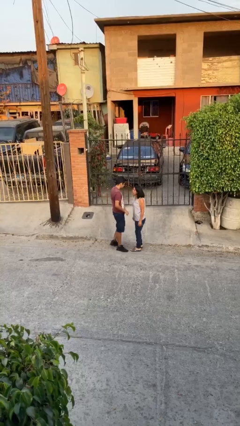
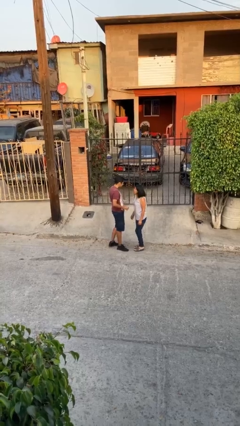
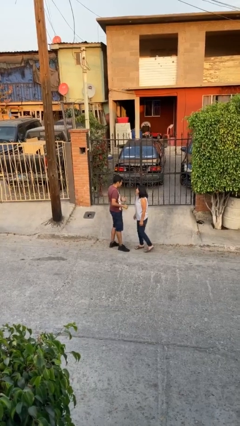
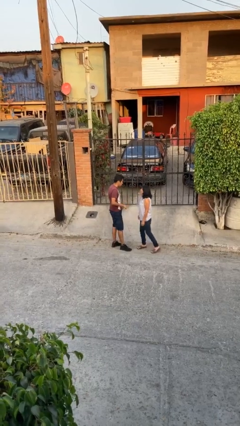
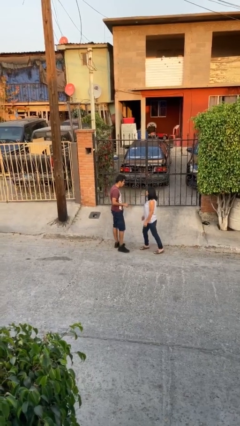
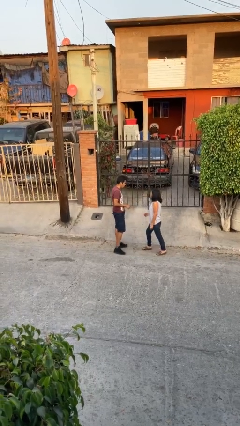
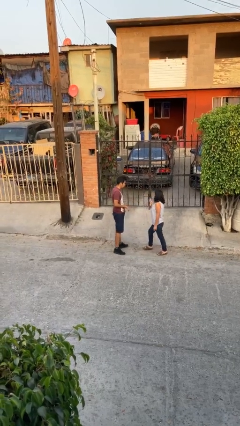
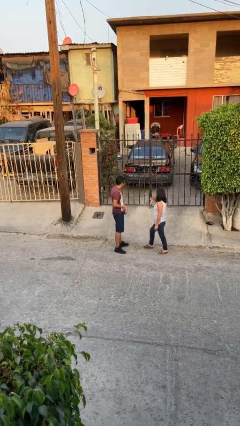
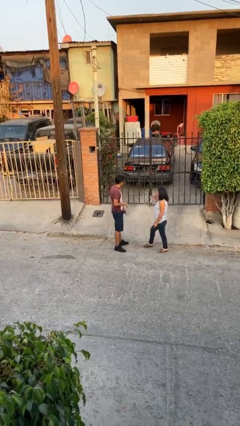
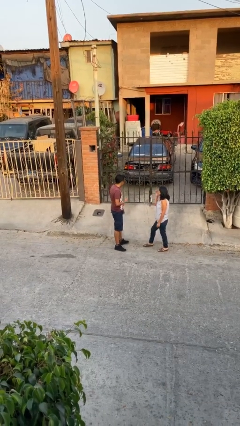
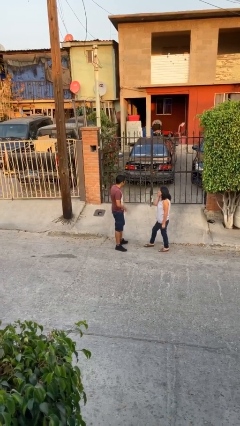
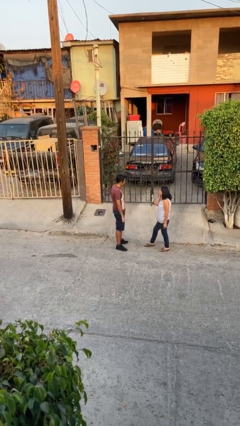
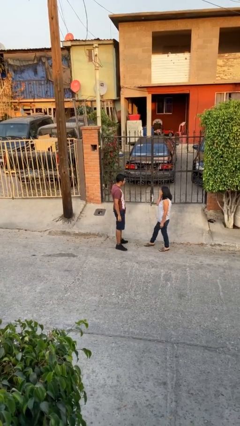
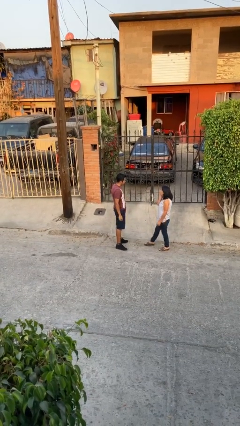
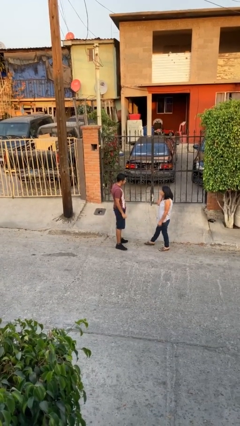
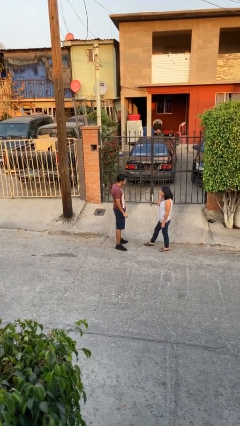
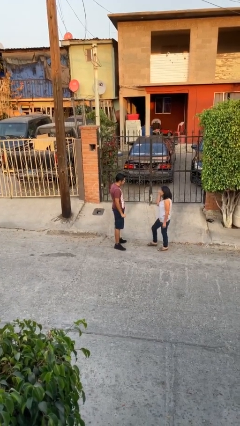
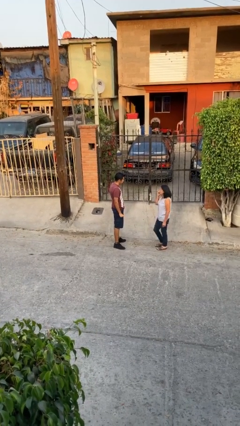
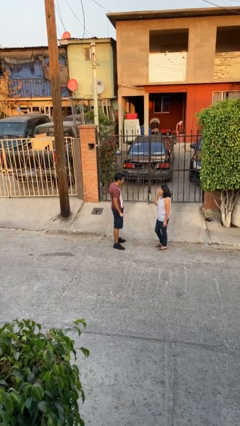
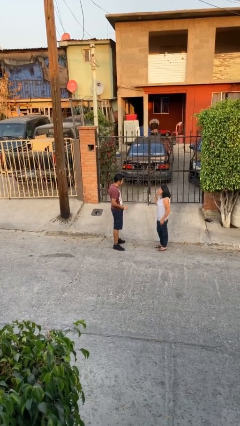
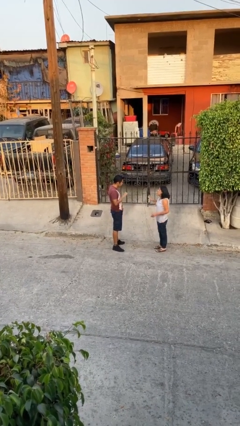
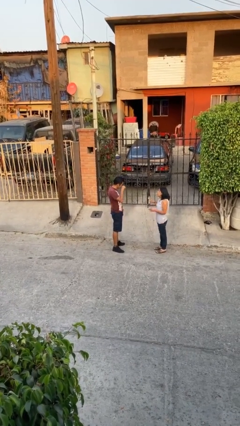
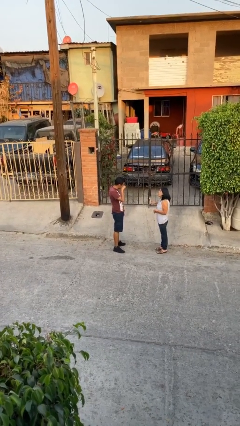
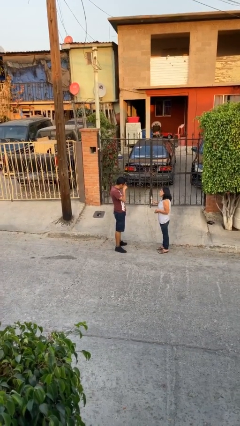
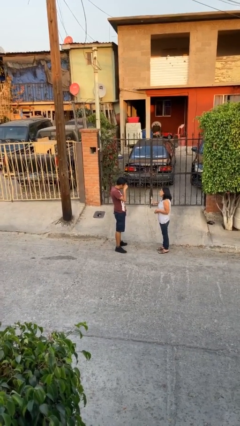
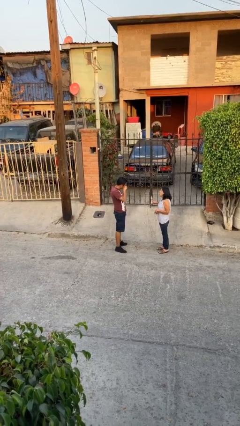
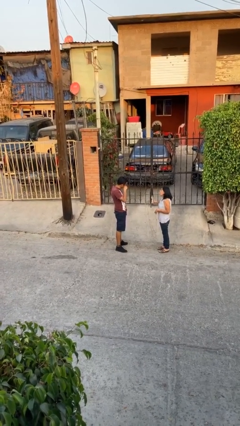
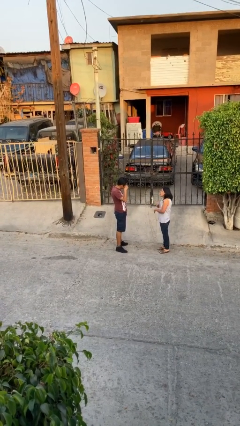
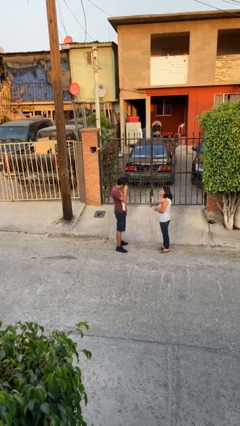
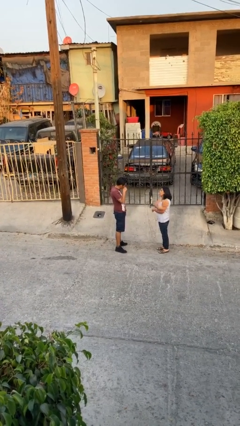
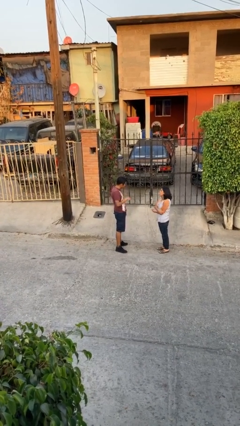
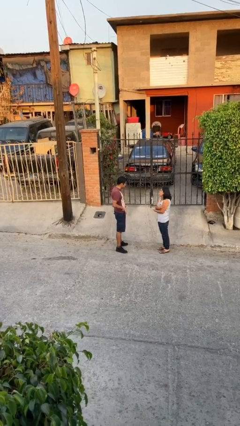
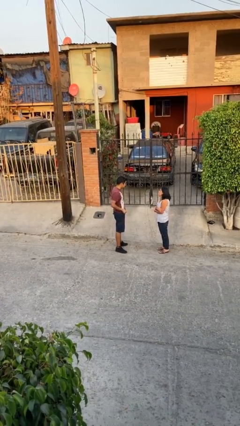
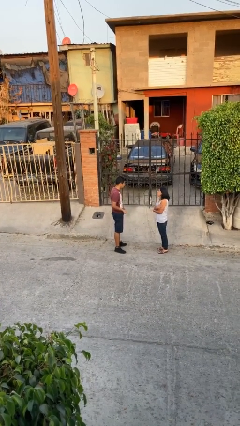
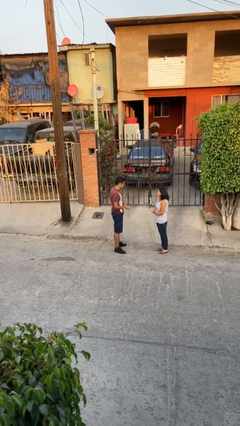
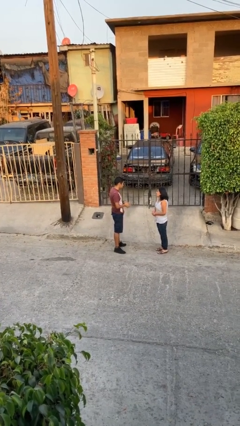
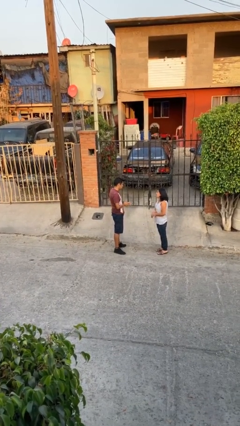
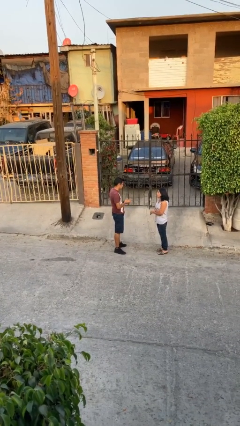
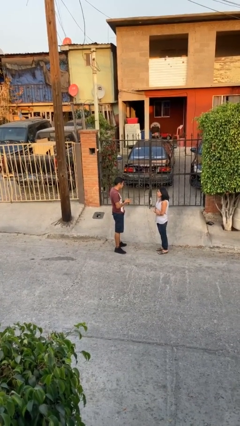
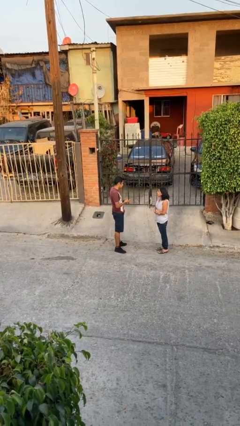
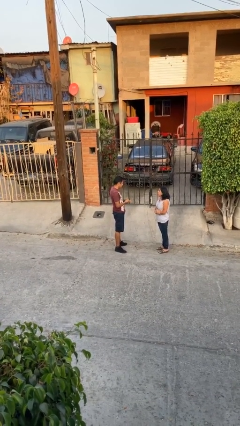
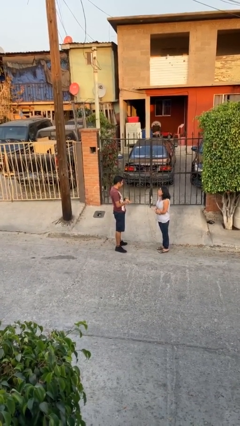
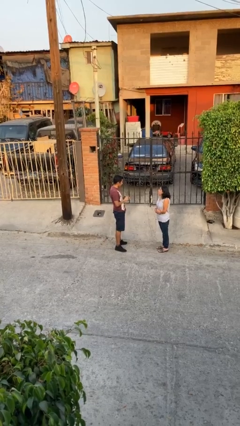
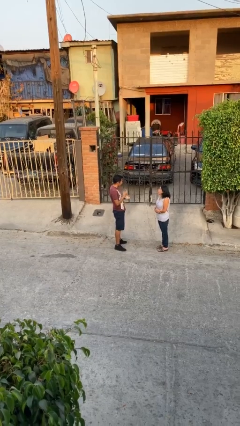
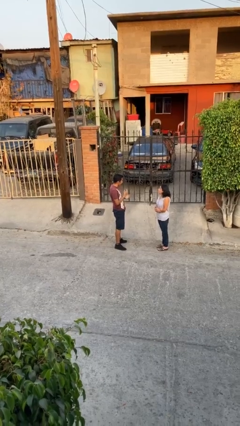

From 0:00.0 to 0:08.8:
person talks to person

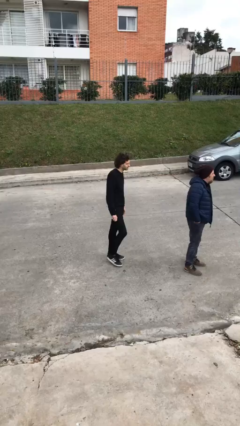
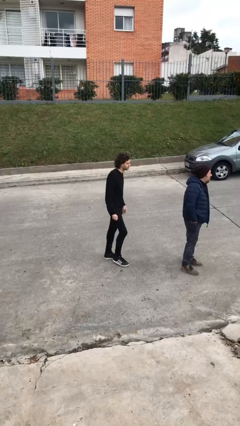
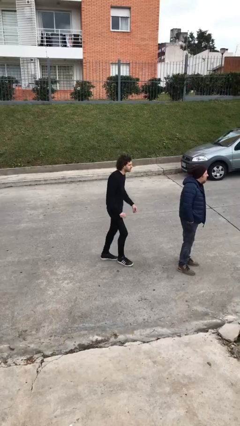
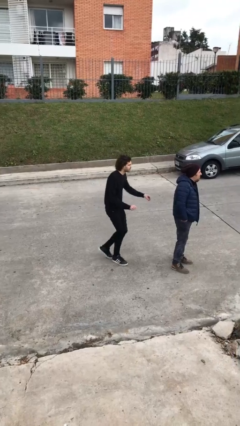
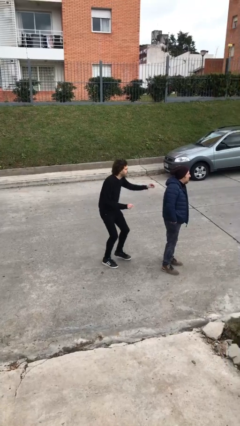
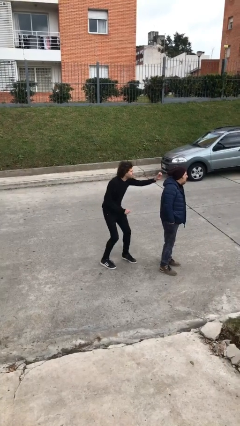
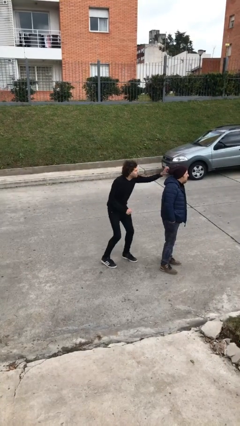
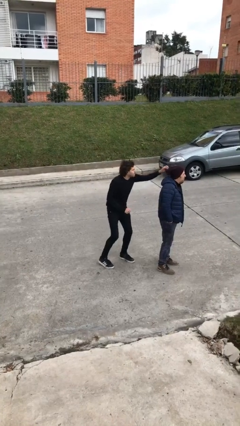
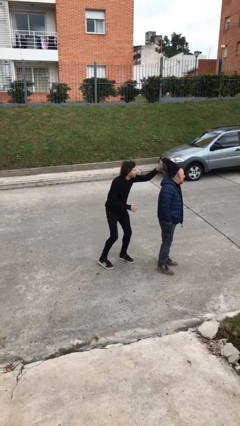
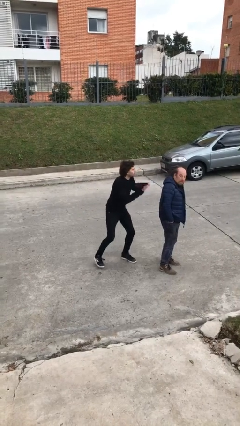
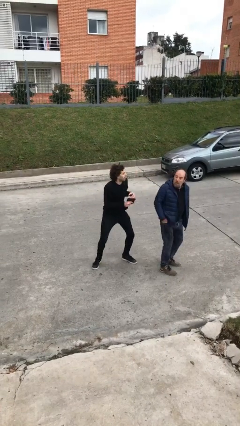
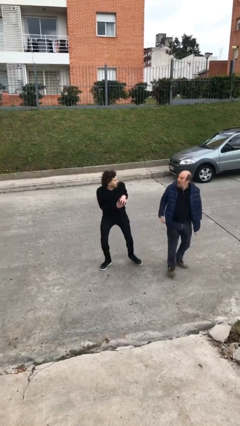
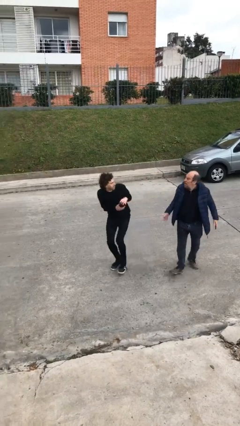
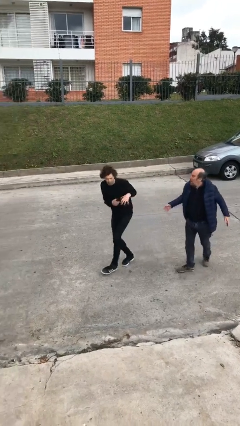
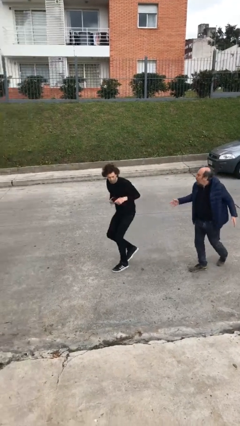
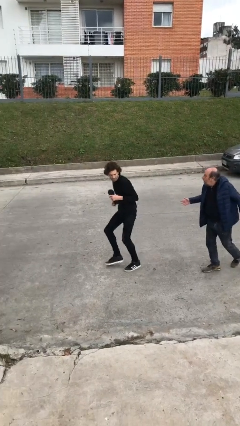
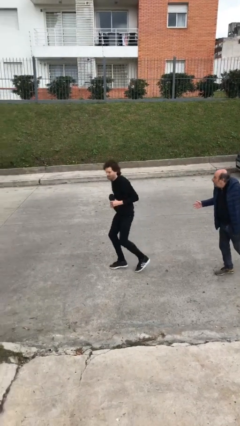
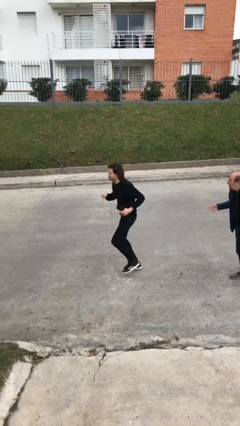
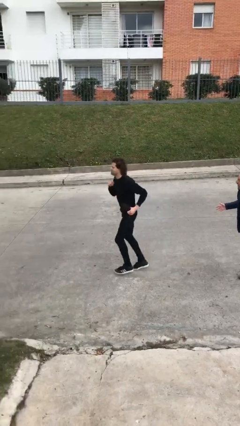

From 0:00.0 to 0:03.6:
person steals object from person

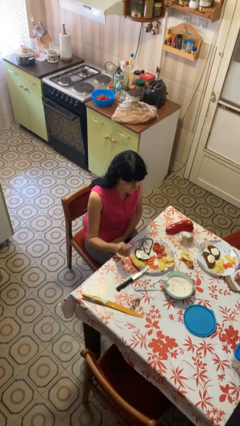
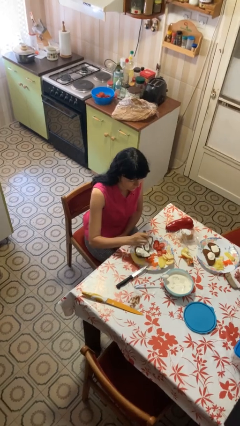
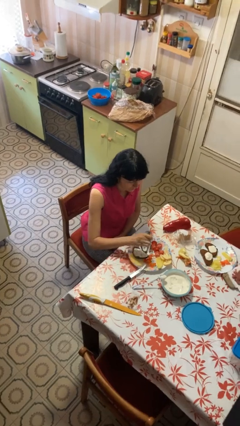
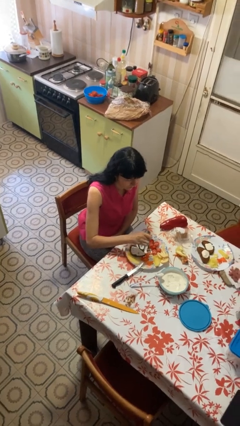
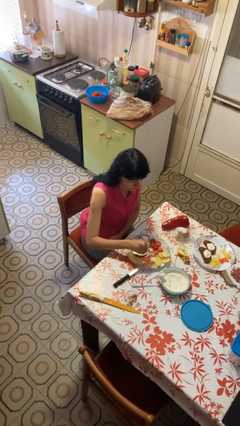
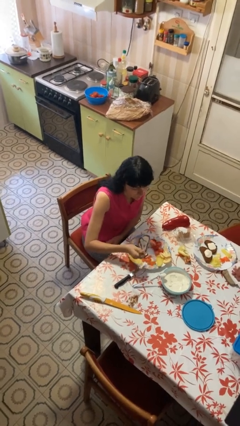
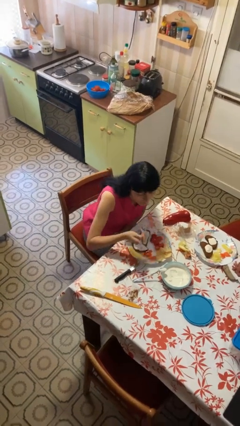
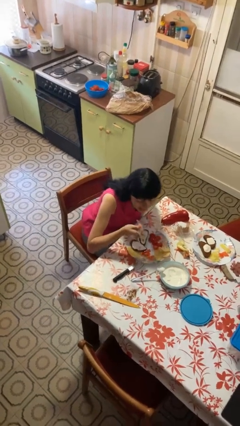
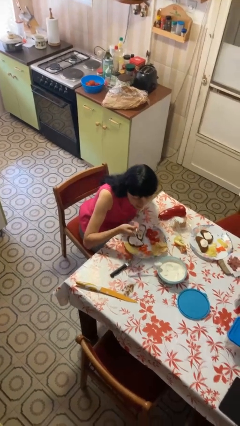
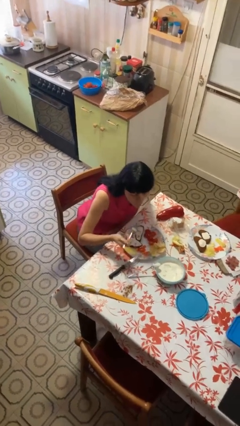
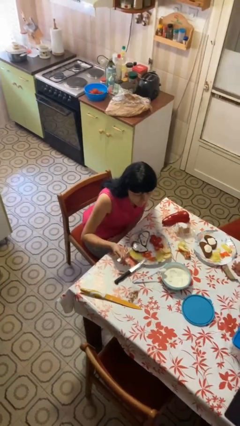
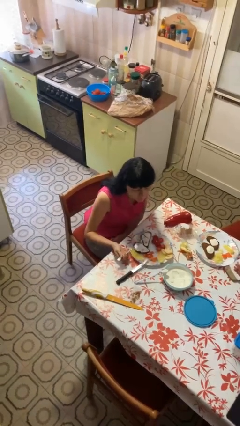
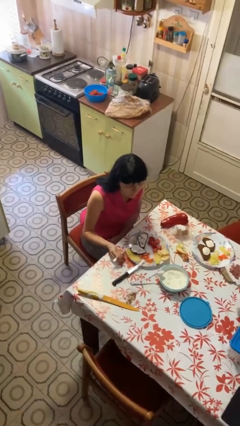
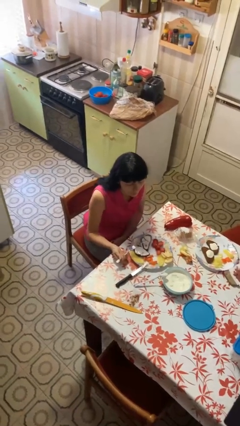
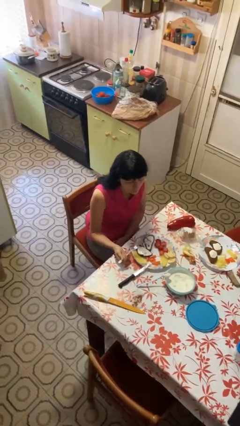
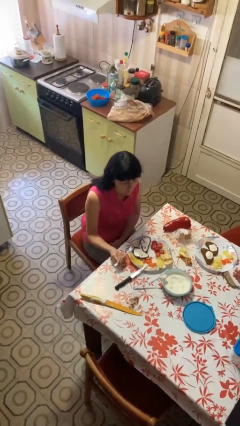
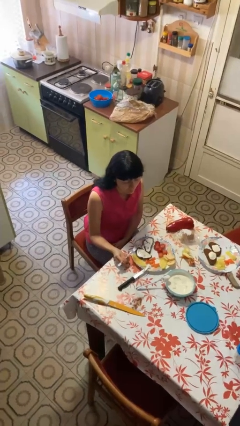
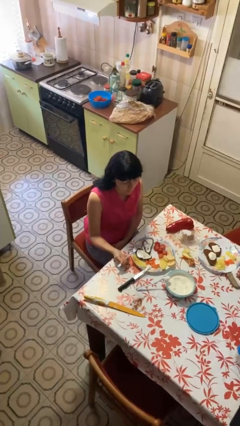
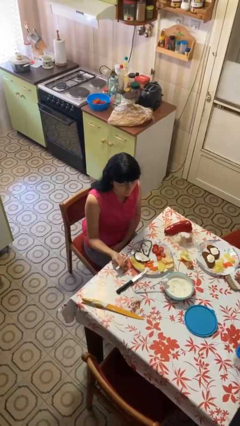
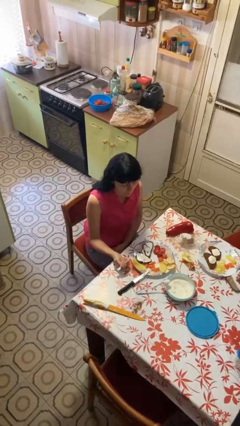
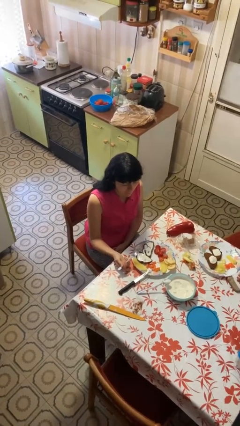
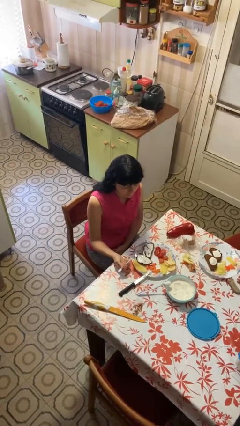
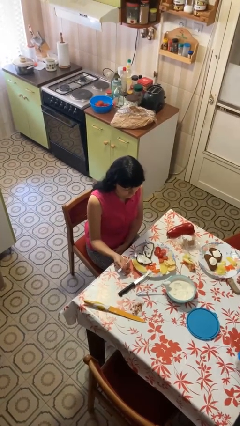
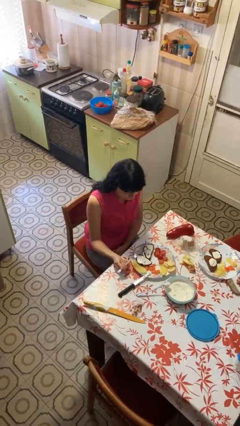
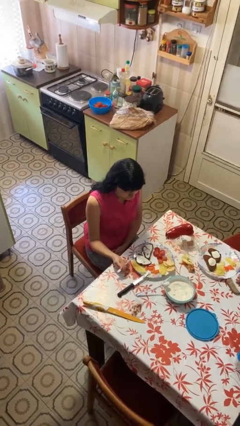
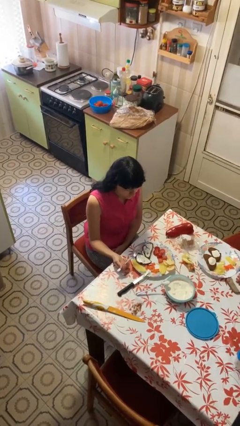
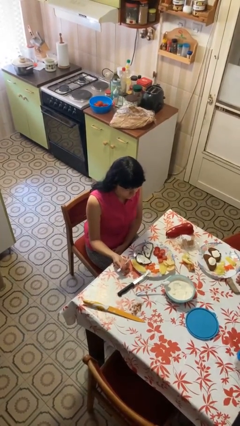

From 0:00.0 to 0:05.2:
person eats with utensil

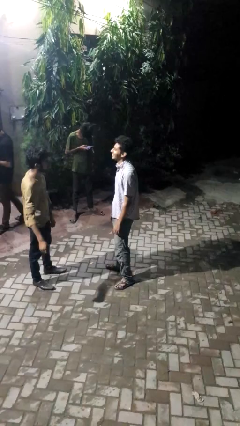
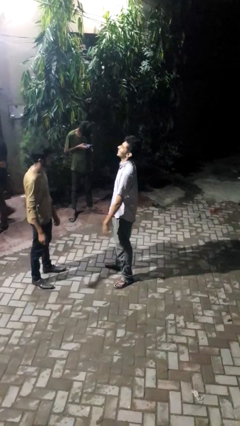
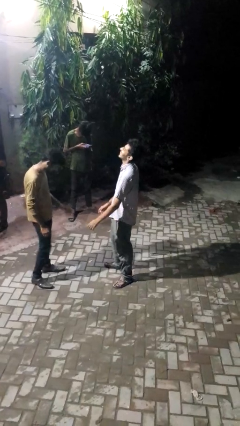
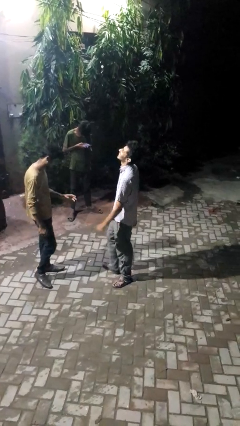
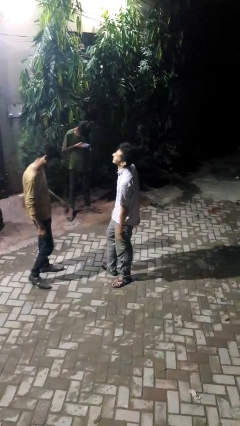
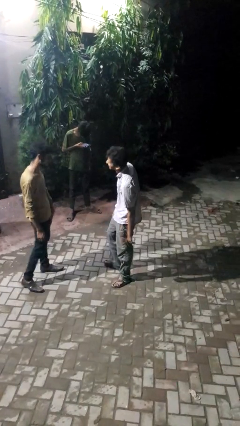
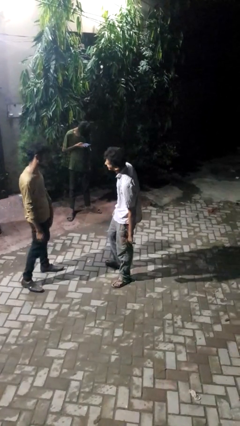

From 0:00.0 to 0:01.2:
person laughs with person
